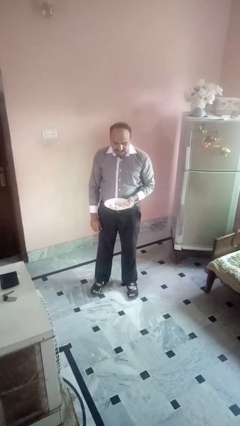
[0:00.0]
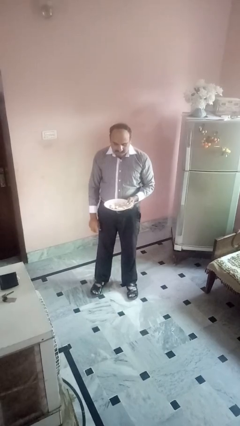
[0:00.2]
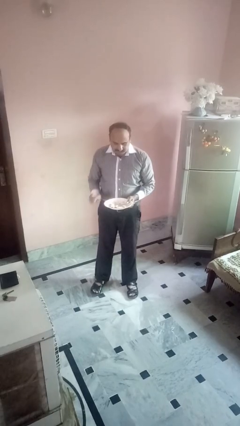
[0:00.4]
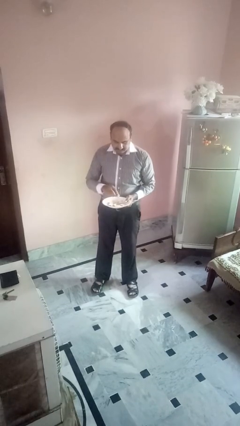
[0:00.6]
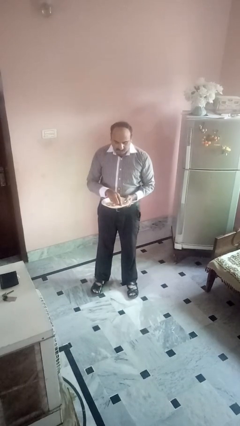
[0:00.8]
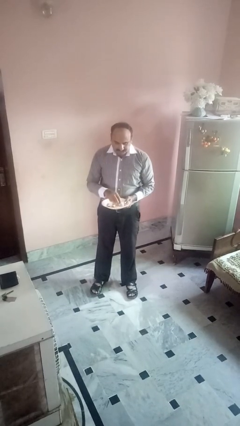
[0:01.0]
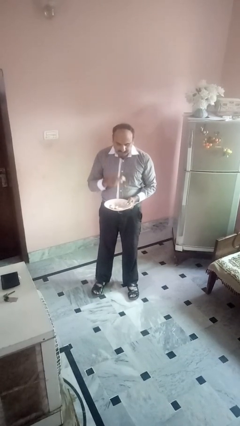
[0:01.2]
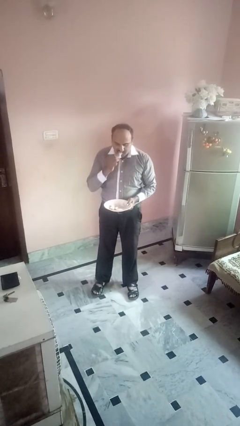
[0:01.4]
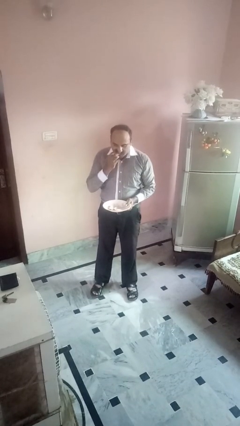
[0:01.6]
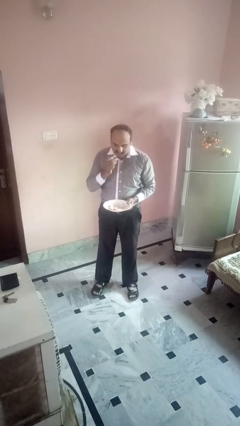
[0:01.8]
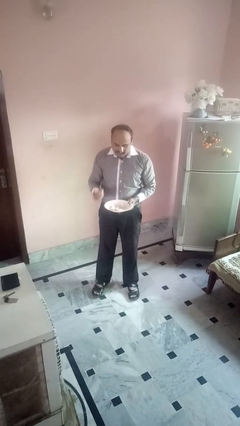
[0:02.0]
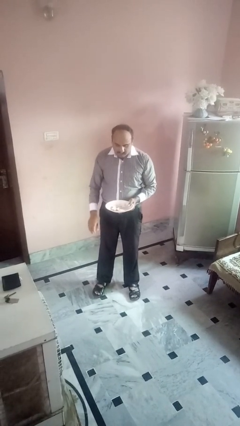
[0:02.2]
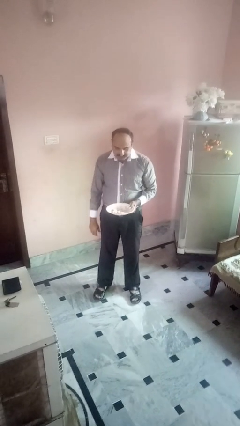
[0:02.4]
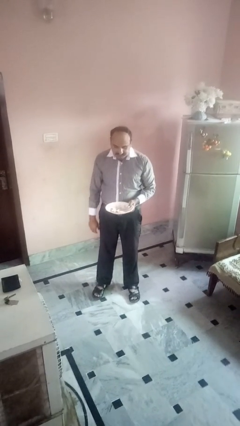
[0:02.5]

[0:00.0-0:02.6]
person eats with hands

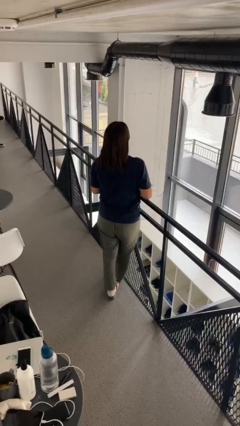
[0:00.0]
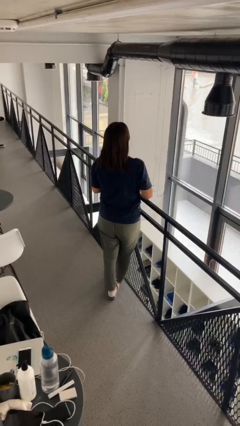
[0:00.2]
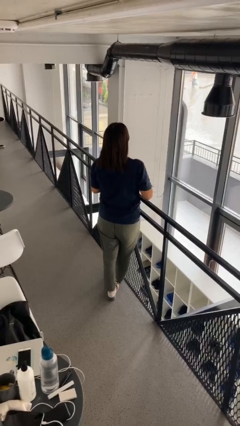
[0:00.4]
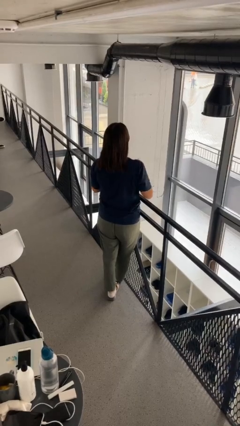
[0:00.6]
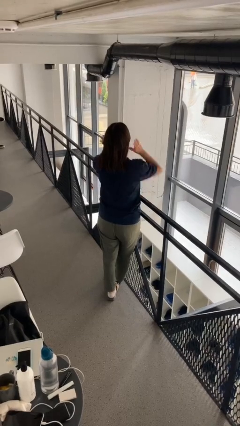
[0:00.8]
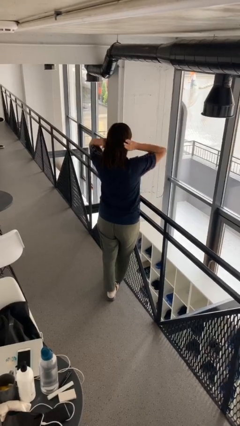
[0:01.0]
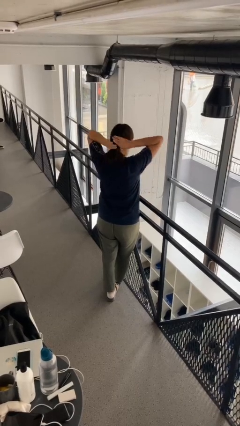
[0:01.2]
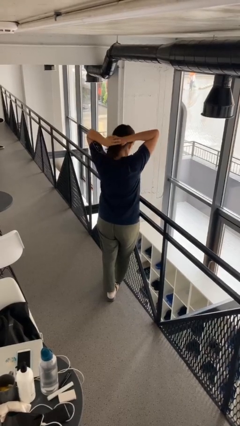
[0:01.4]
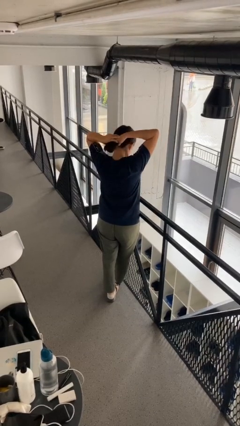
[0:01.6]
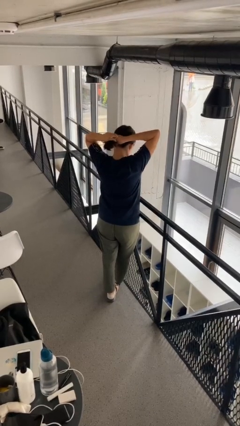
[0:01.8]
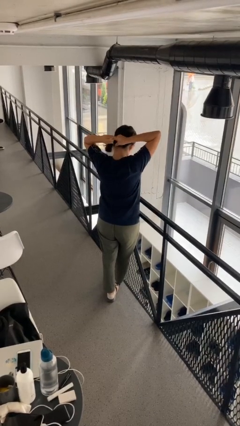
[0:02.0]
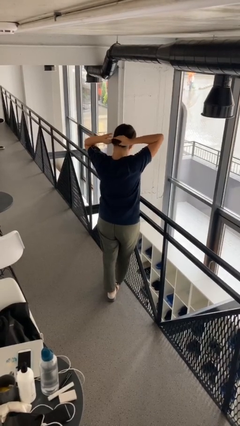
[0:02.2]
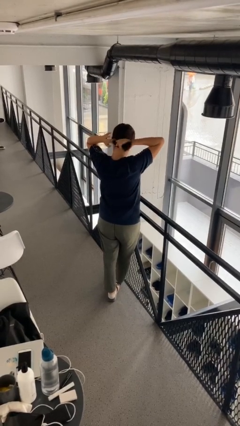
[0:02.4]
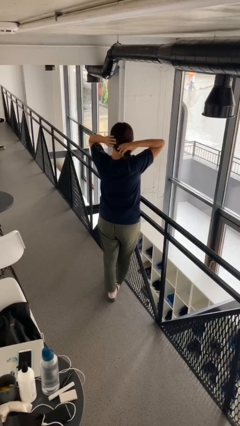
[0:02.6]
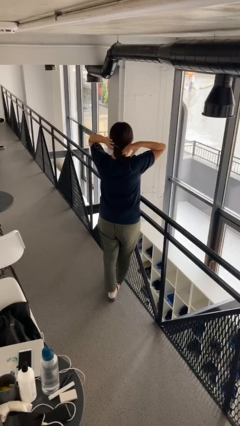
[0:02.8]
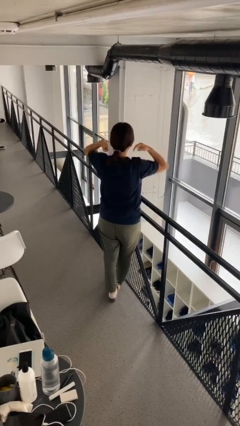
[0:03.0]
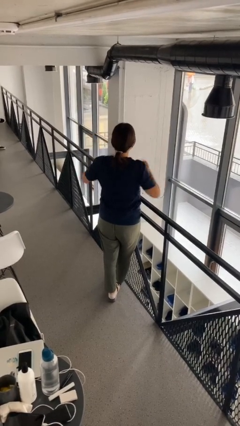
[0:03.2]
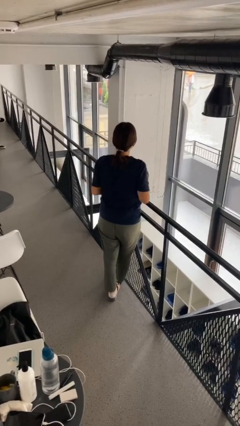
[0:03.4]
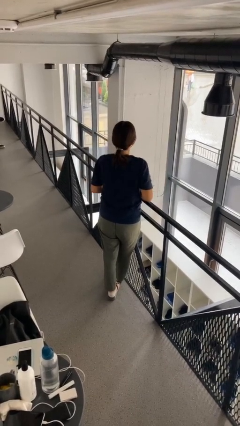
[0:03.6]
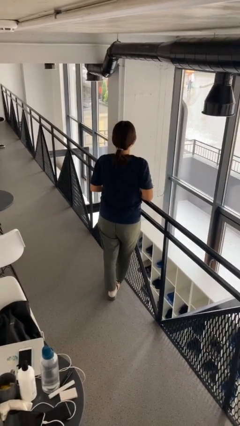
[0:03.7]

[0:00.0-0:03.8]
person puts hair in ponytail

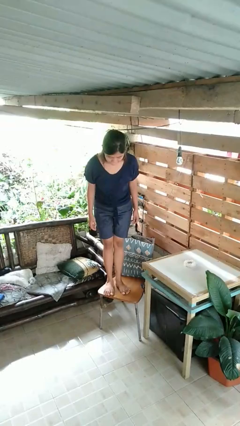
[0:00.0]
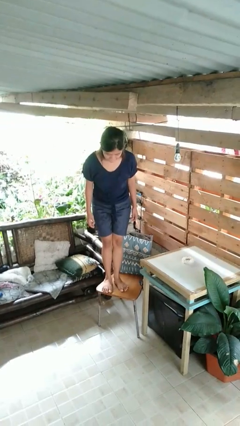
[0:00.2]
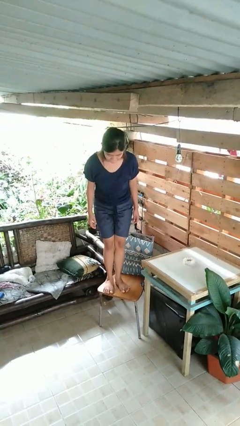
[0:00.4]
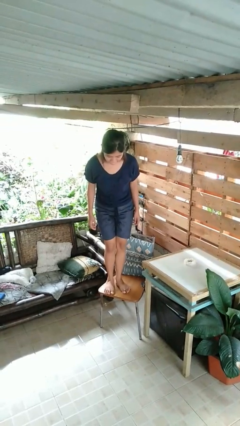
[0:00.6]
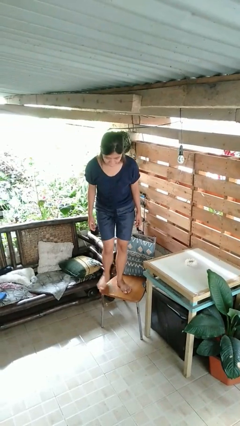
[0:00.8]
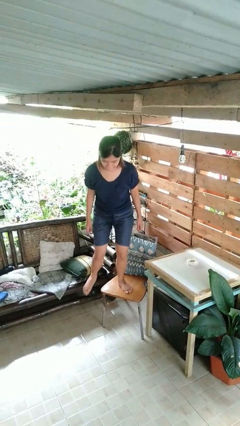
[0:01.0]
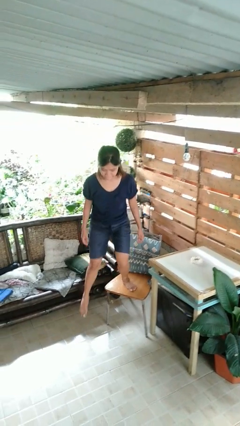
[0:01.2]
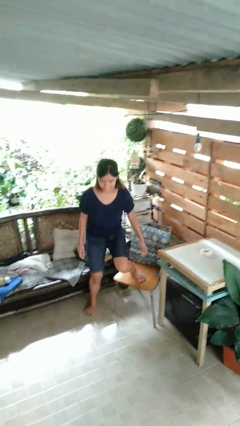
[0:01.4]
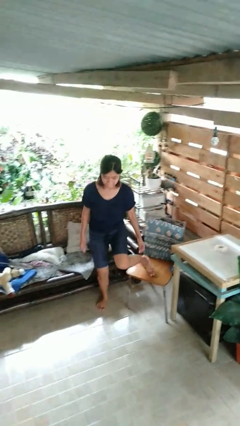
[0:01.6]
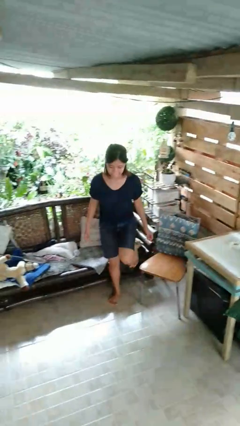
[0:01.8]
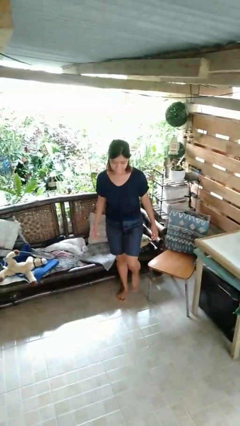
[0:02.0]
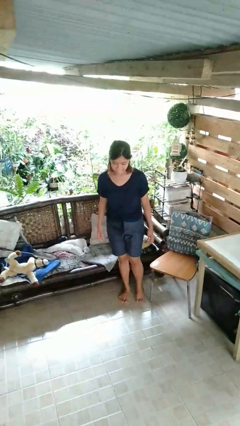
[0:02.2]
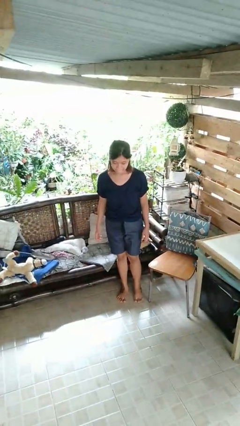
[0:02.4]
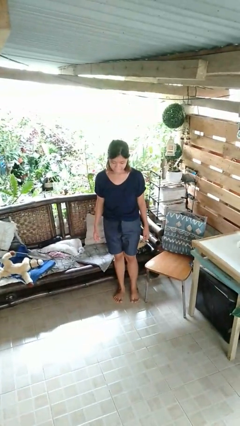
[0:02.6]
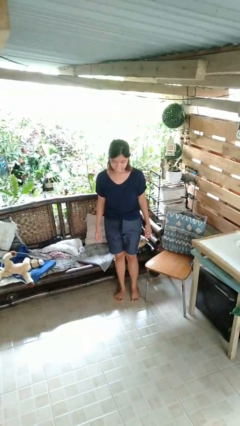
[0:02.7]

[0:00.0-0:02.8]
person climbs off chair

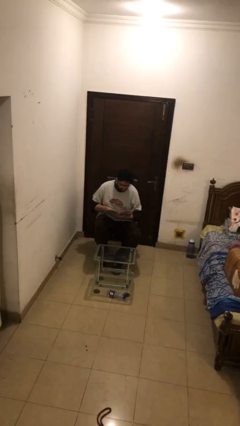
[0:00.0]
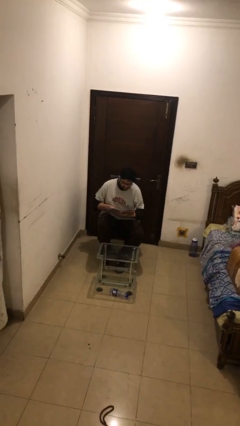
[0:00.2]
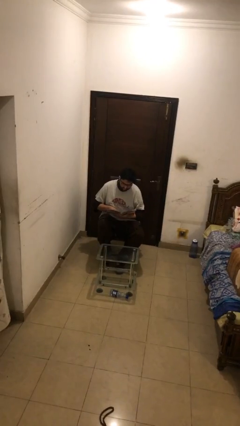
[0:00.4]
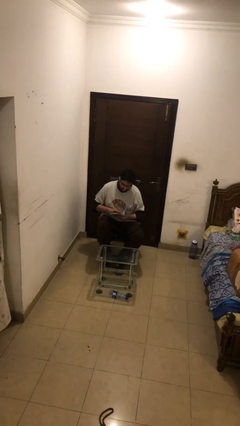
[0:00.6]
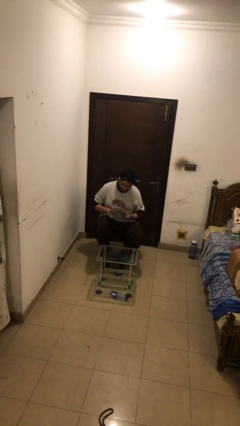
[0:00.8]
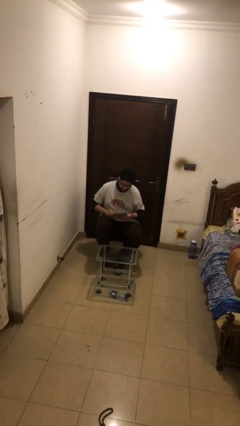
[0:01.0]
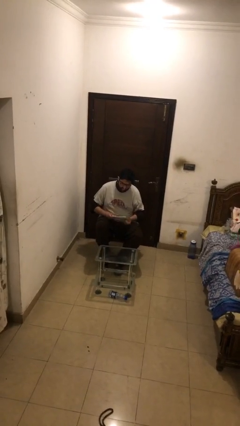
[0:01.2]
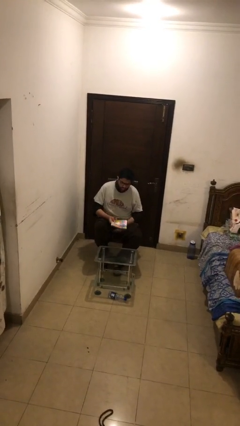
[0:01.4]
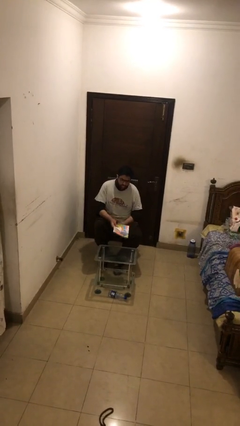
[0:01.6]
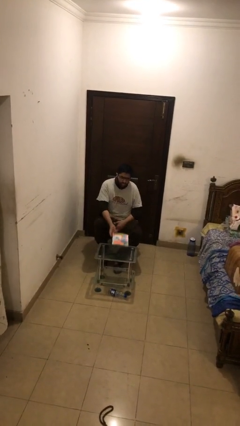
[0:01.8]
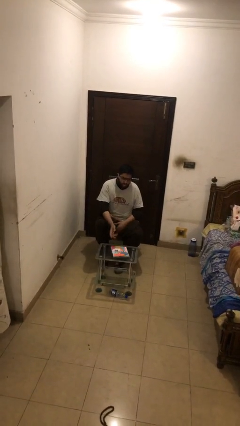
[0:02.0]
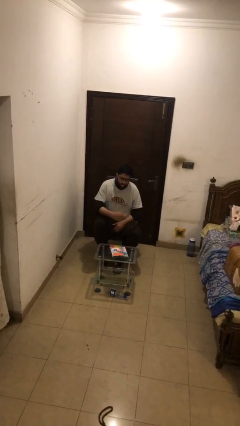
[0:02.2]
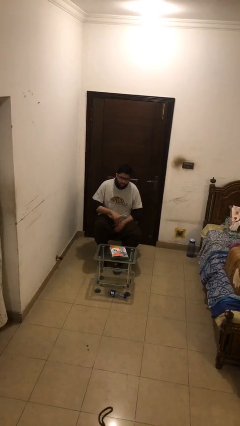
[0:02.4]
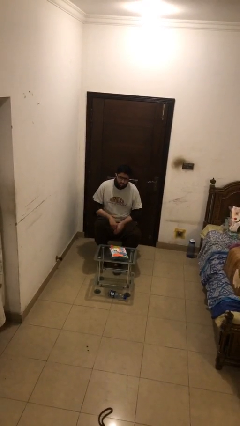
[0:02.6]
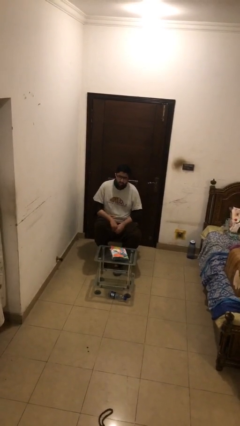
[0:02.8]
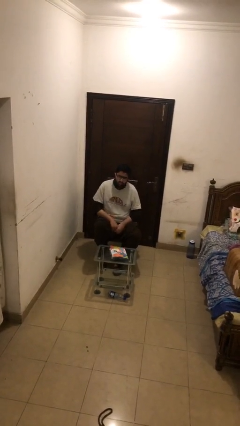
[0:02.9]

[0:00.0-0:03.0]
person puts down object on table

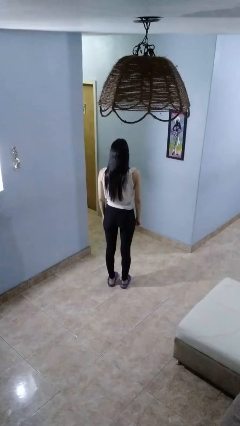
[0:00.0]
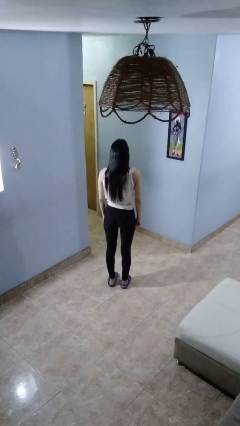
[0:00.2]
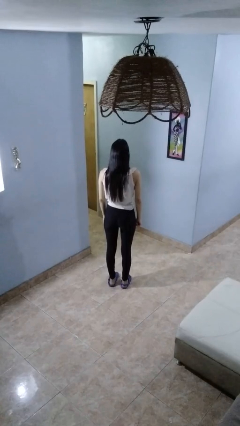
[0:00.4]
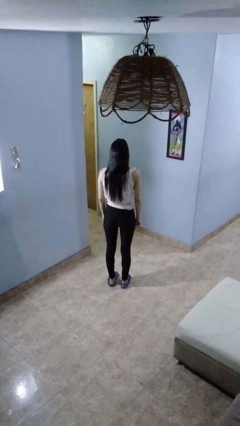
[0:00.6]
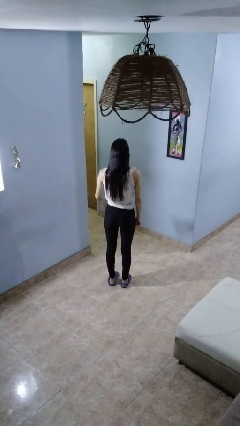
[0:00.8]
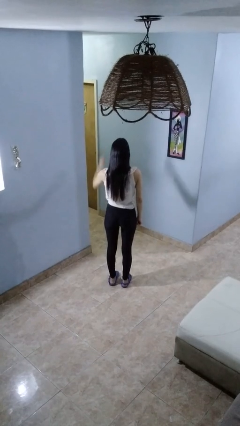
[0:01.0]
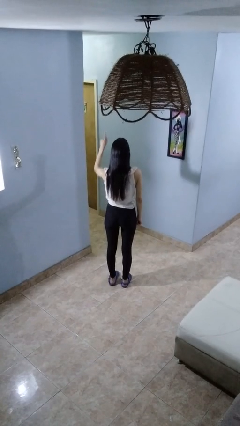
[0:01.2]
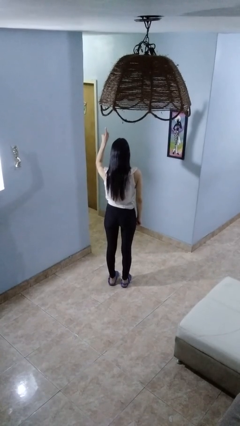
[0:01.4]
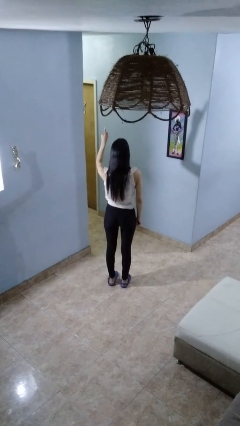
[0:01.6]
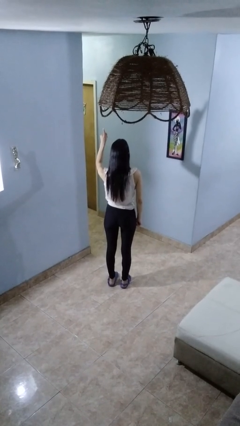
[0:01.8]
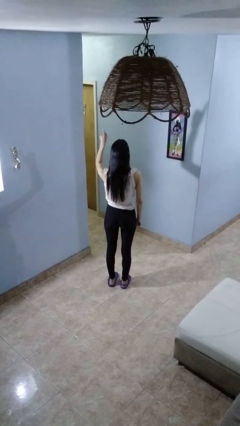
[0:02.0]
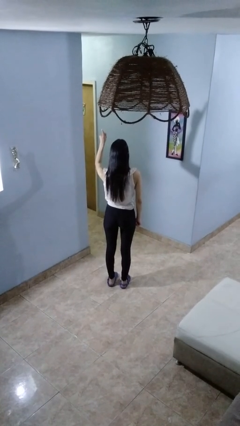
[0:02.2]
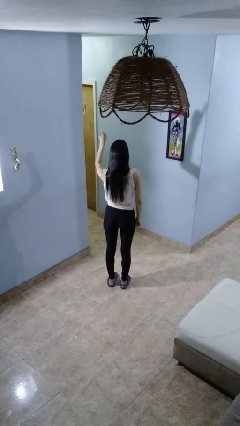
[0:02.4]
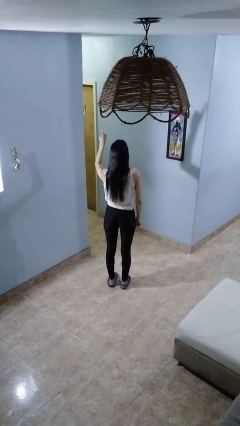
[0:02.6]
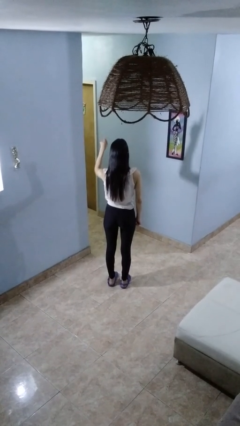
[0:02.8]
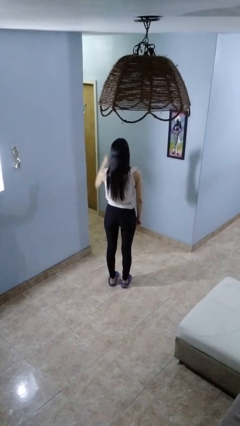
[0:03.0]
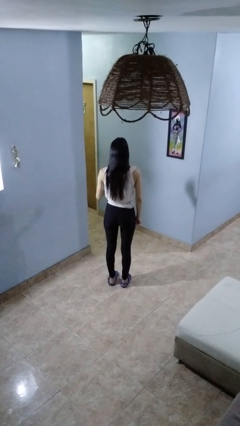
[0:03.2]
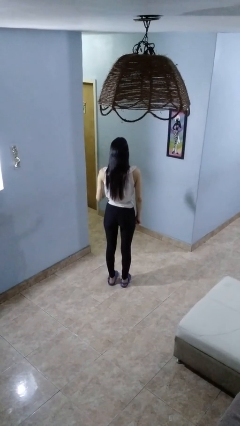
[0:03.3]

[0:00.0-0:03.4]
person gestures number one

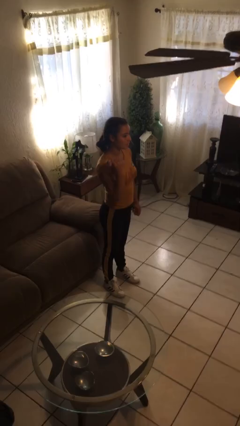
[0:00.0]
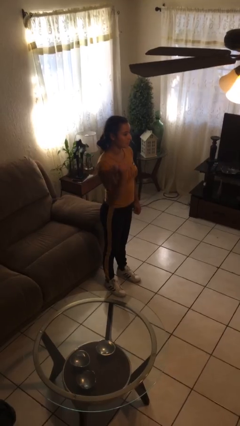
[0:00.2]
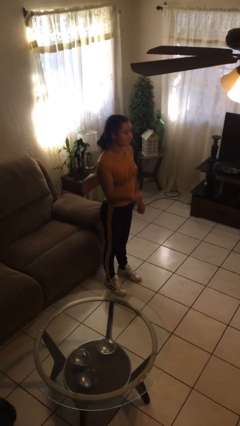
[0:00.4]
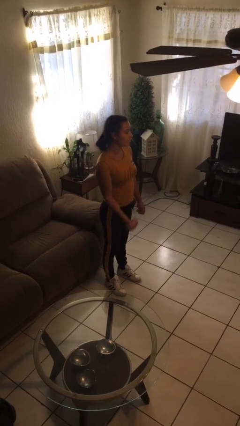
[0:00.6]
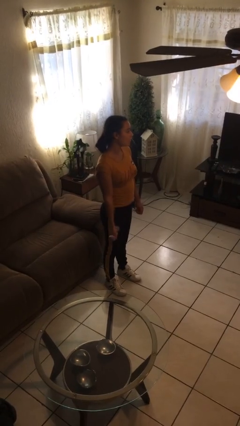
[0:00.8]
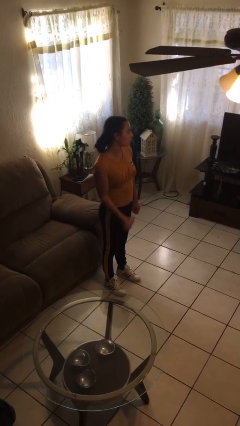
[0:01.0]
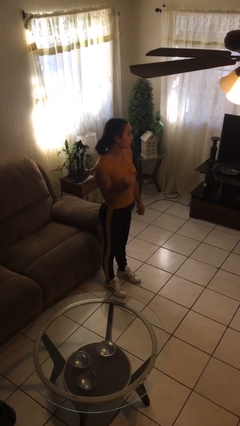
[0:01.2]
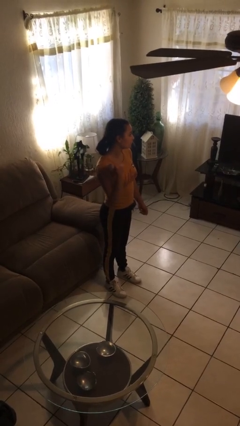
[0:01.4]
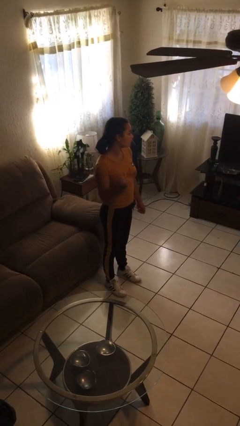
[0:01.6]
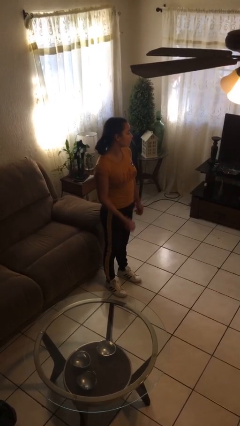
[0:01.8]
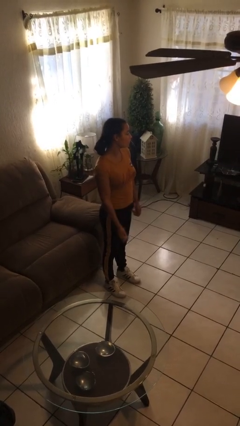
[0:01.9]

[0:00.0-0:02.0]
person lifts dumbbells
